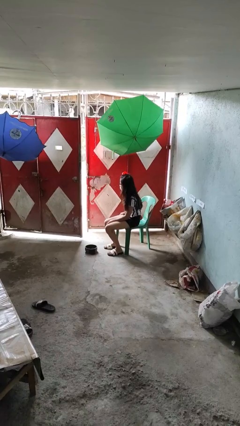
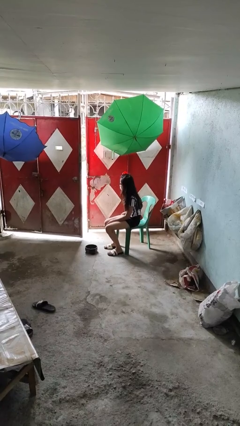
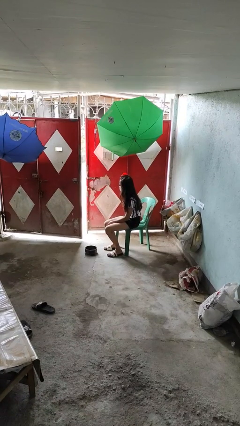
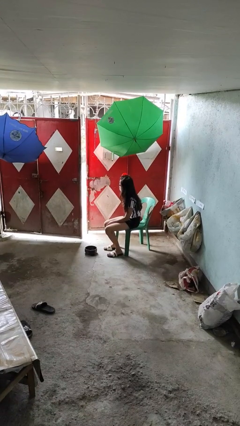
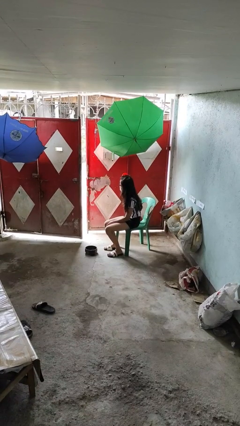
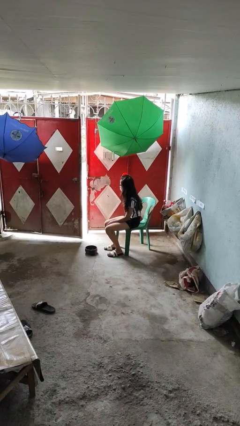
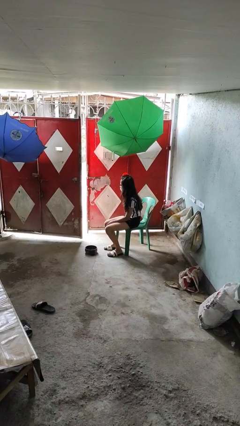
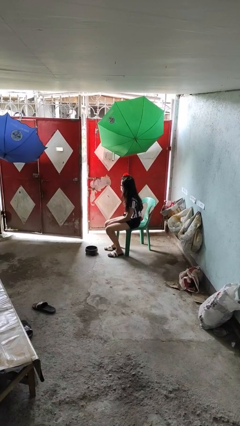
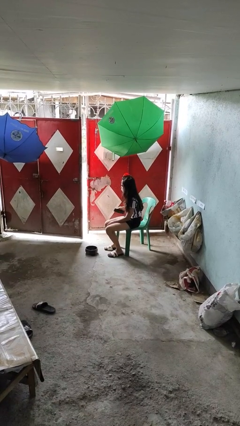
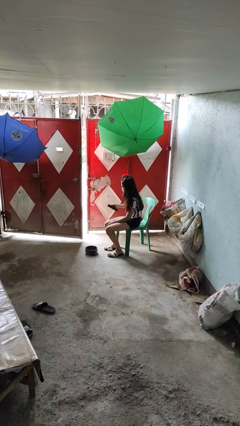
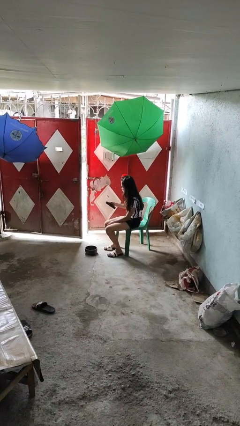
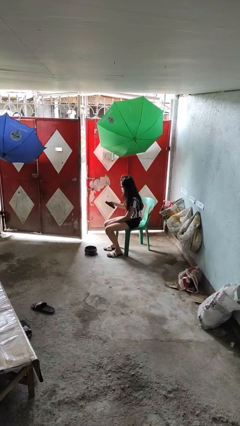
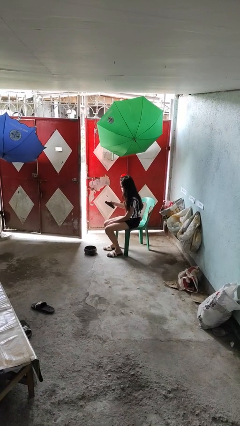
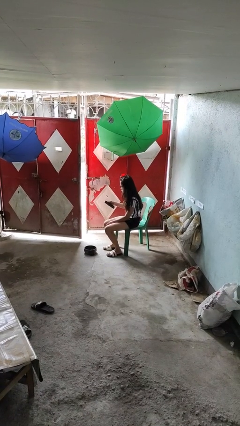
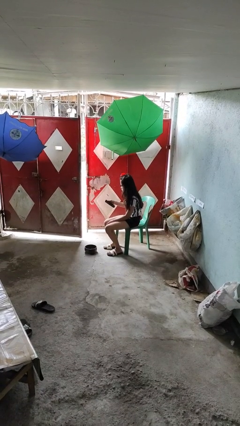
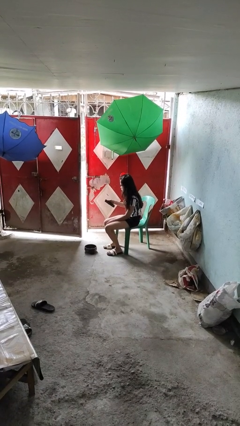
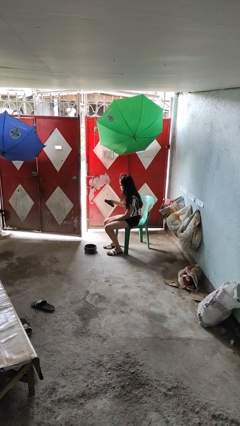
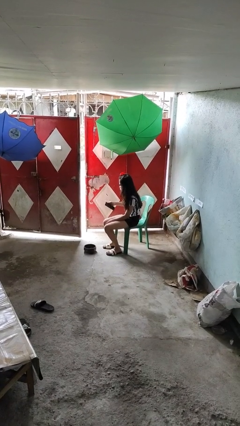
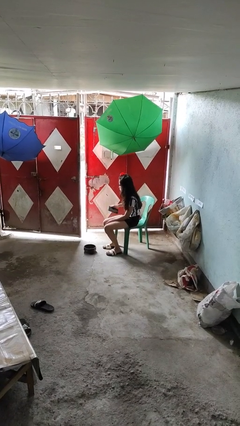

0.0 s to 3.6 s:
person takes phone from pocket

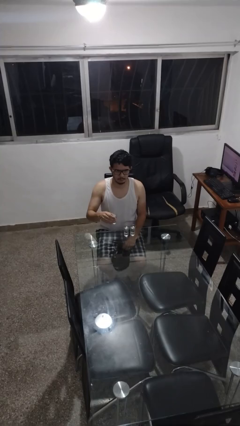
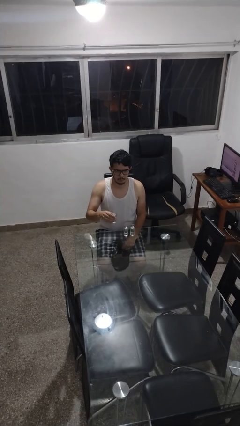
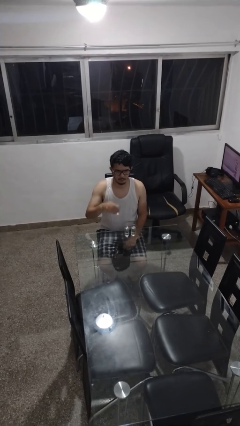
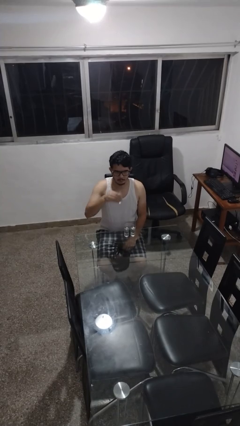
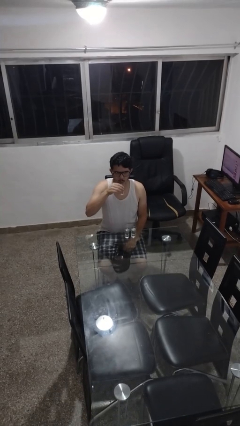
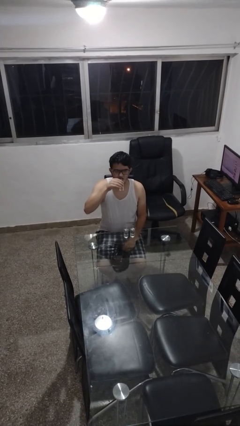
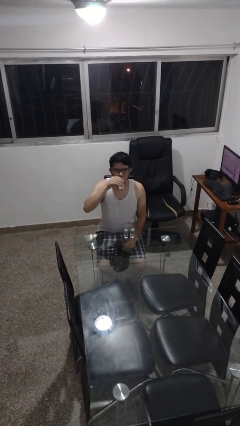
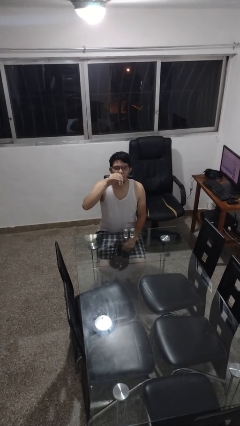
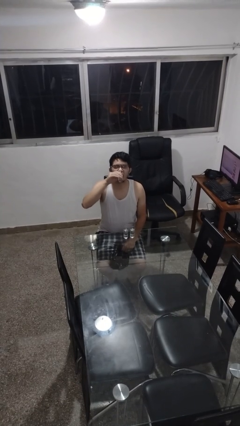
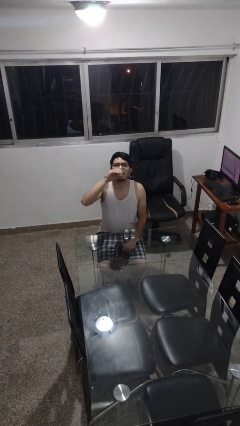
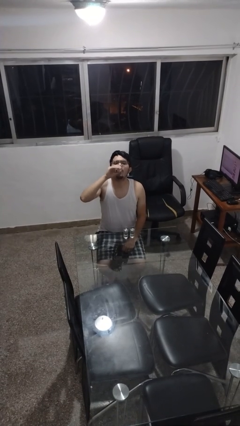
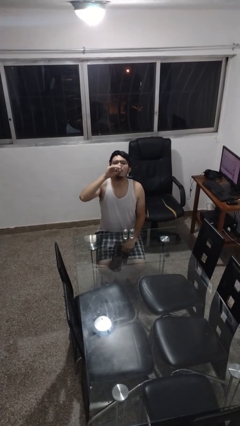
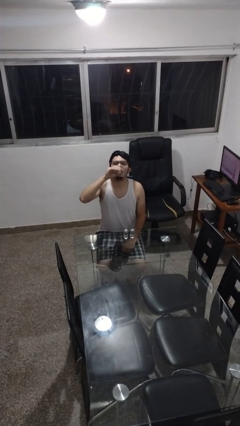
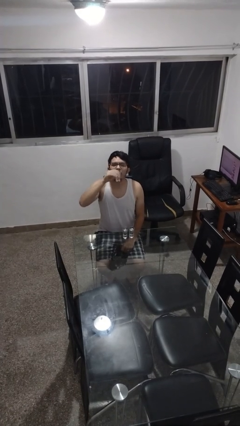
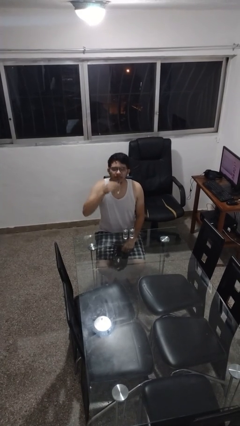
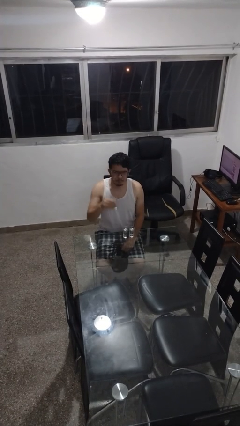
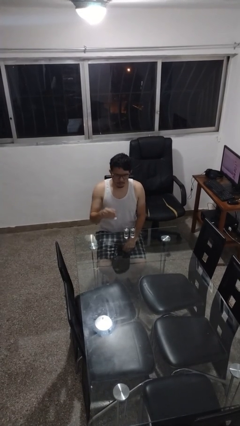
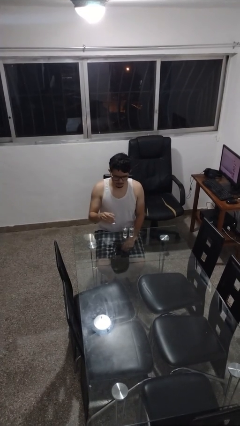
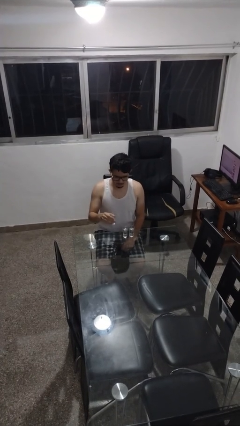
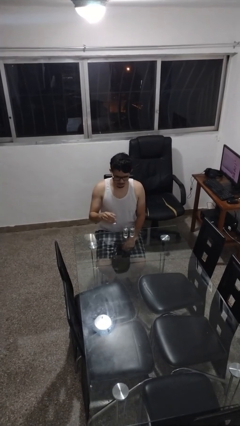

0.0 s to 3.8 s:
person drinks from shotglass

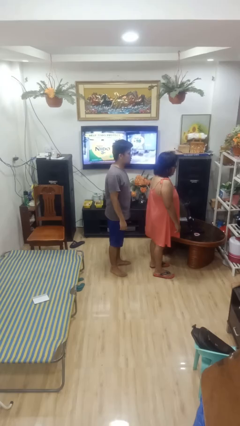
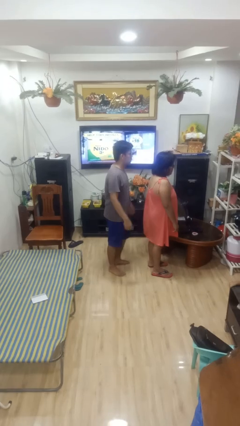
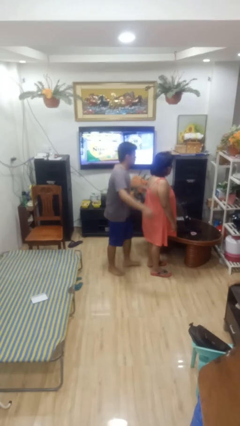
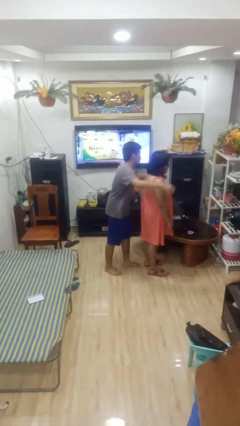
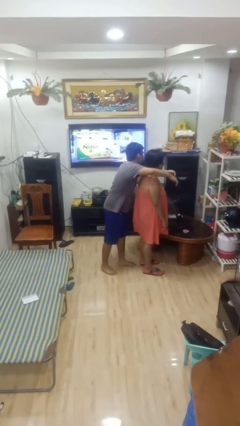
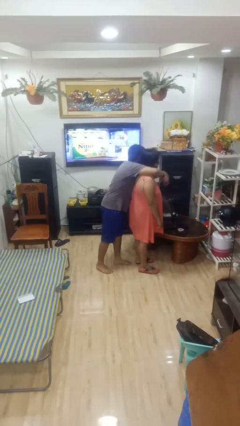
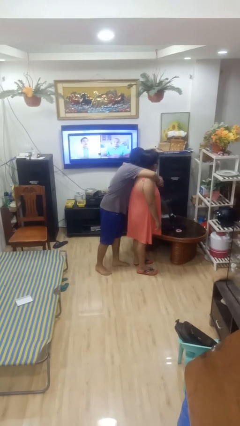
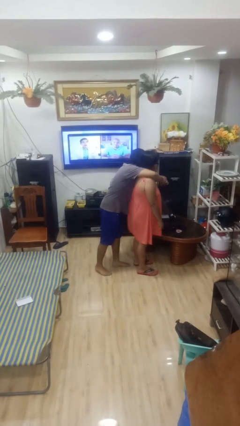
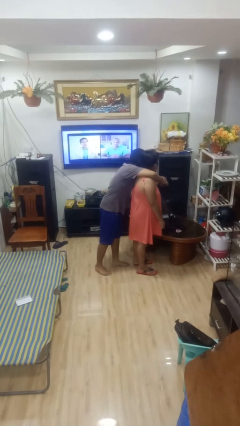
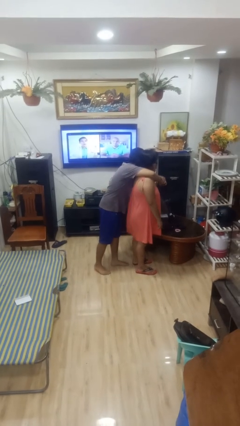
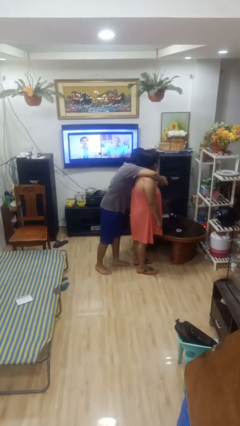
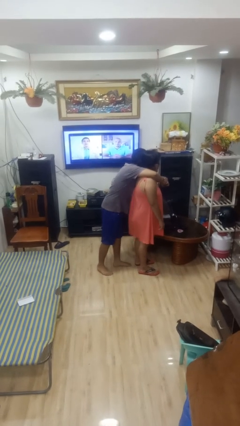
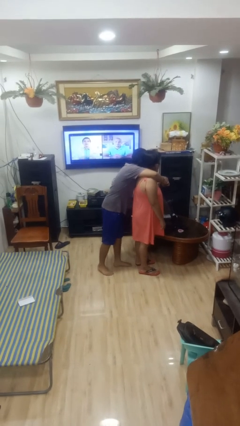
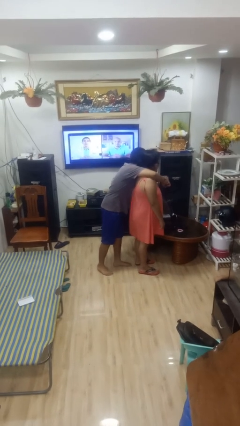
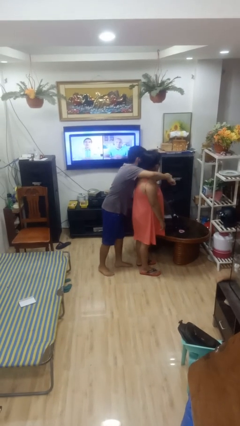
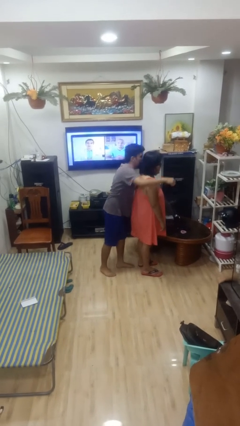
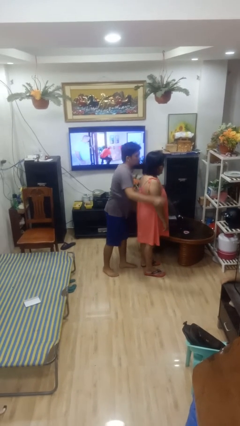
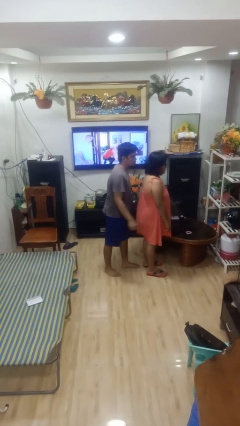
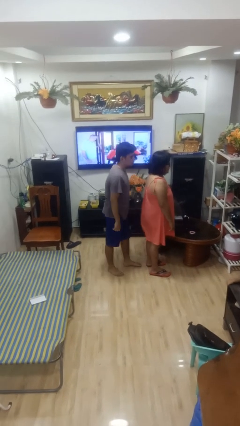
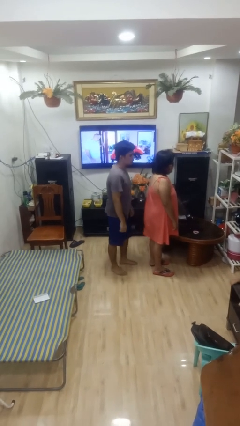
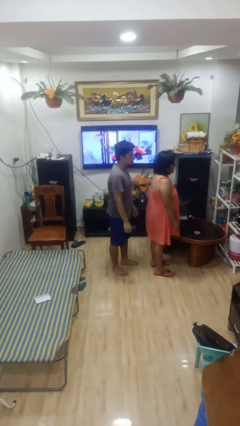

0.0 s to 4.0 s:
person hugs person from behind

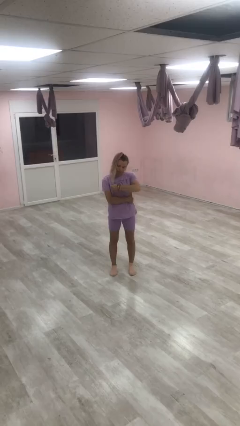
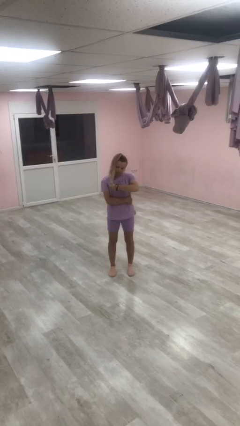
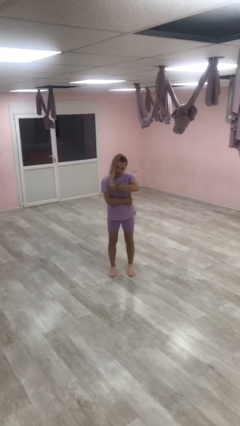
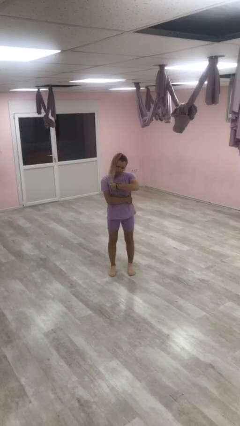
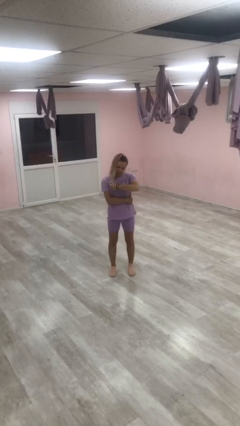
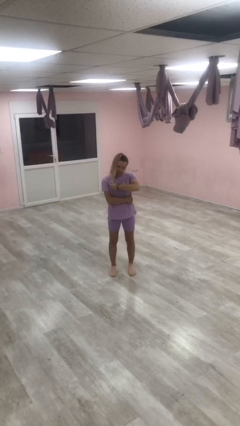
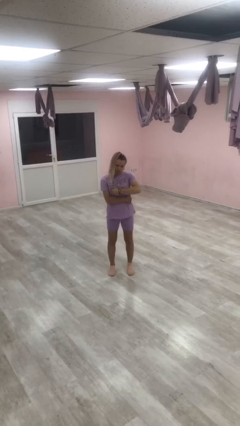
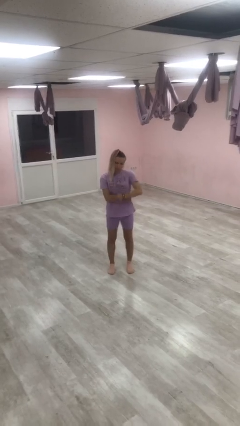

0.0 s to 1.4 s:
person looks at wristwatch

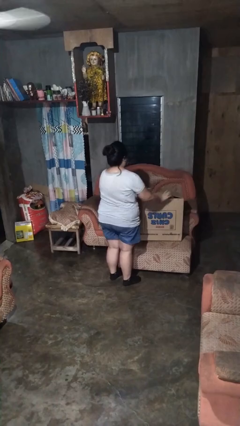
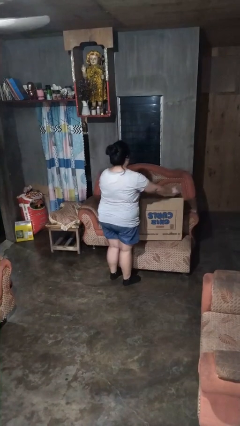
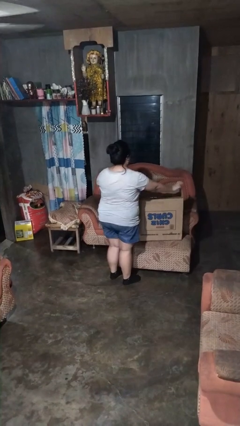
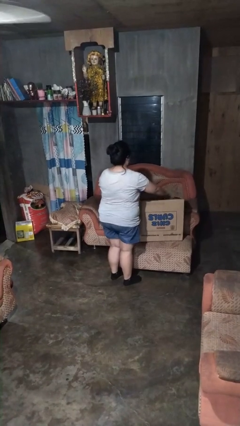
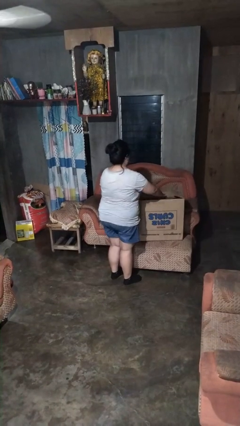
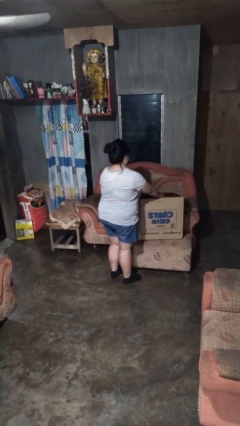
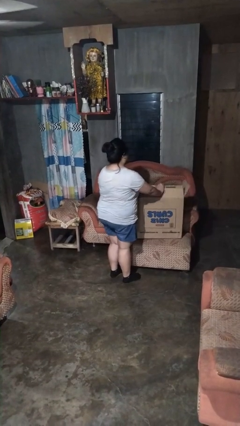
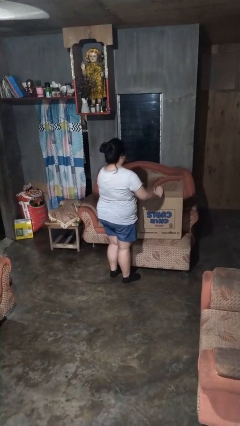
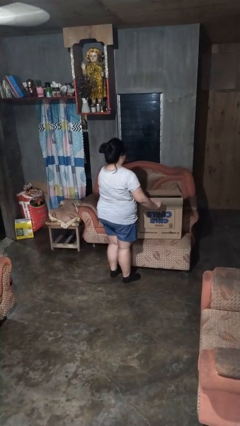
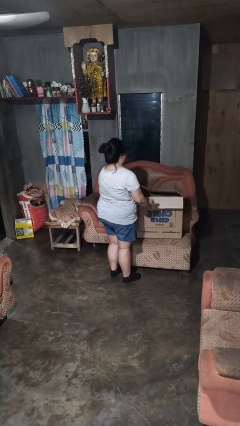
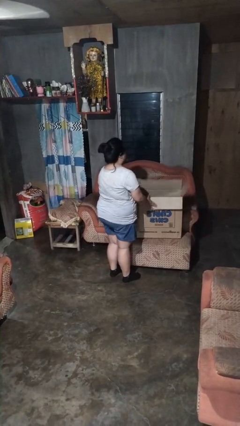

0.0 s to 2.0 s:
person opens box

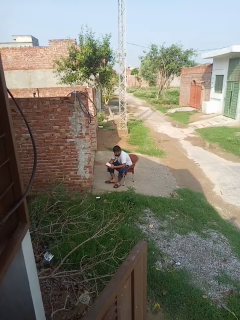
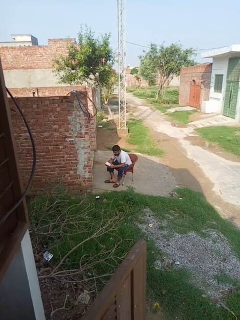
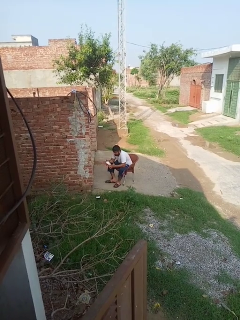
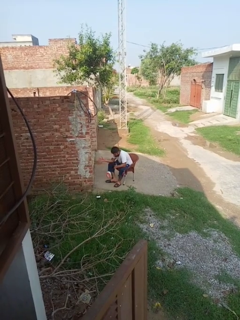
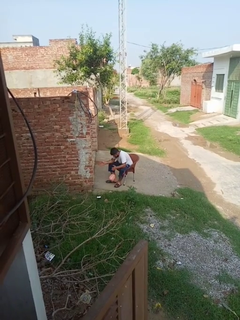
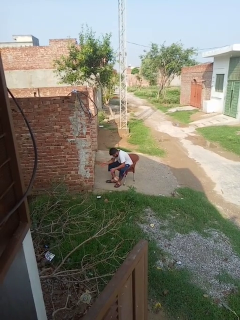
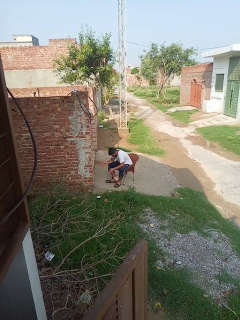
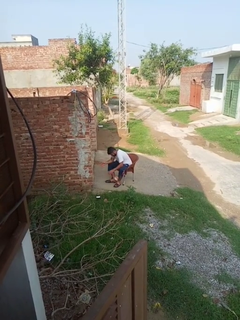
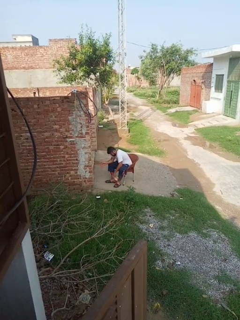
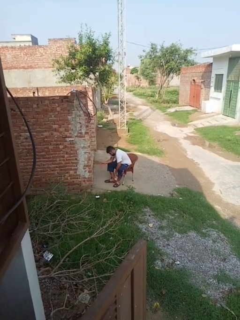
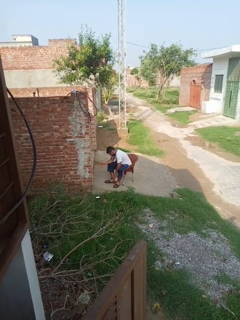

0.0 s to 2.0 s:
person drops object

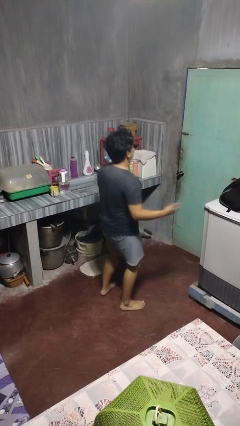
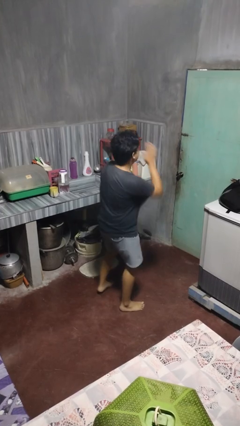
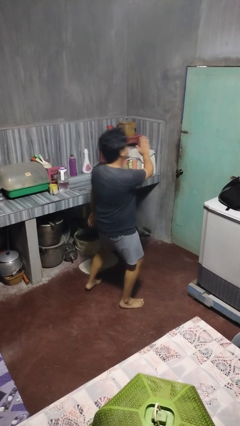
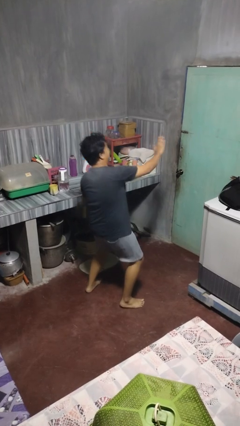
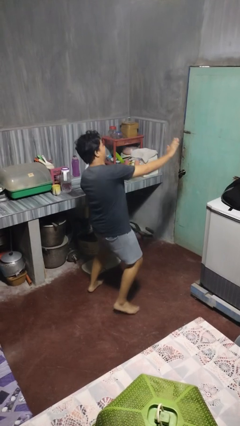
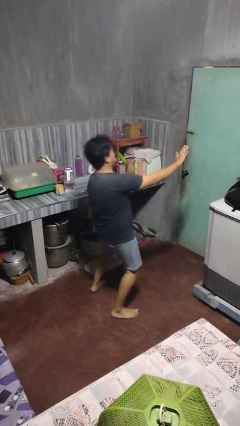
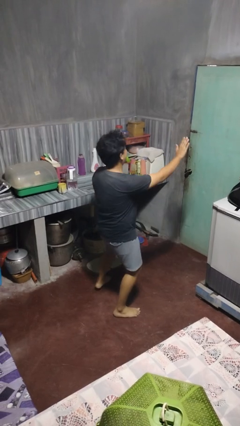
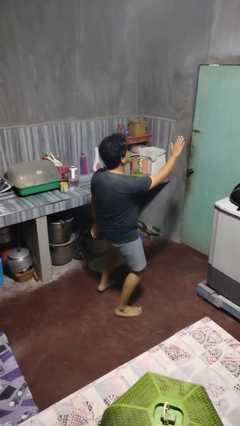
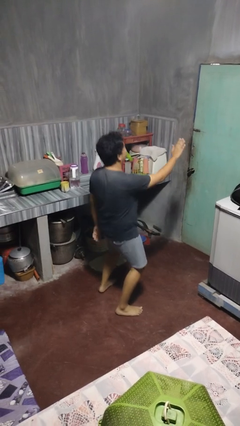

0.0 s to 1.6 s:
person dances in place
